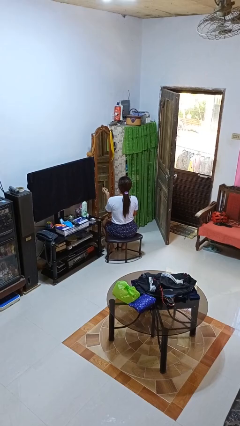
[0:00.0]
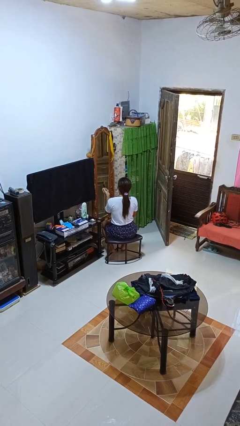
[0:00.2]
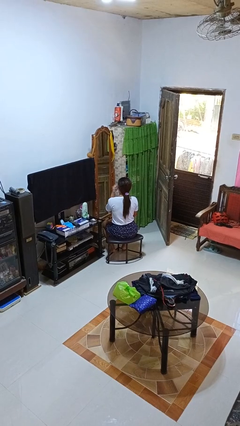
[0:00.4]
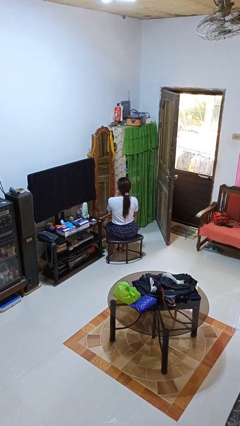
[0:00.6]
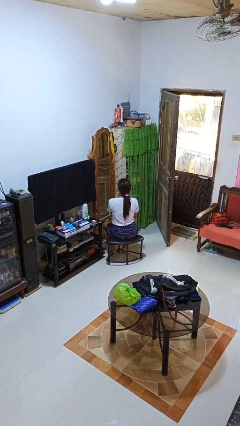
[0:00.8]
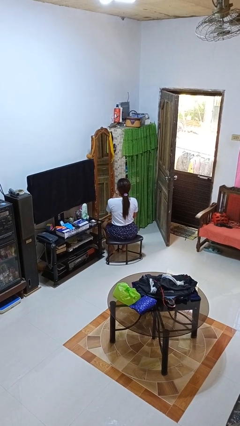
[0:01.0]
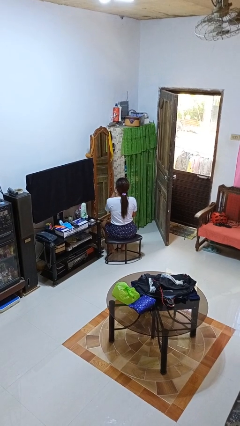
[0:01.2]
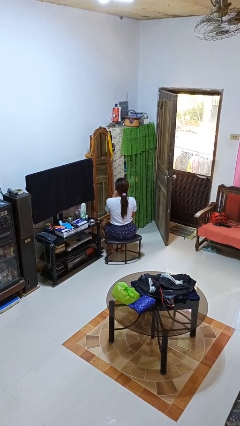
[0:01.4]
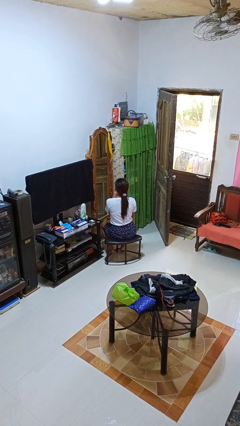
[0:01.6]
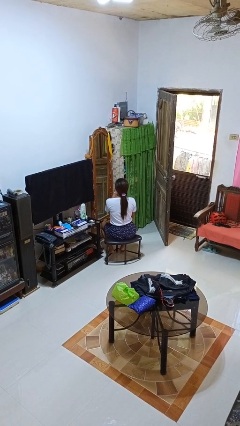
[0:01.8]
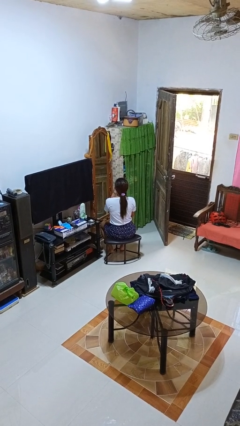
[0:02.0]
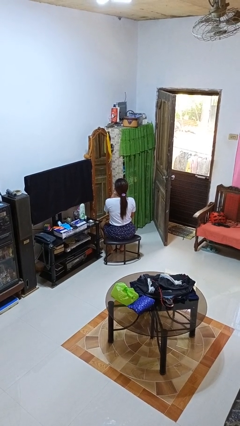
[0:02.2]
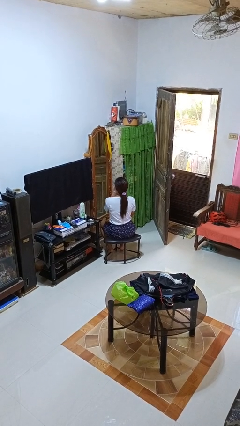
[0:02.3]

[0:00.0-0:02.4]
person applies lip makeup

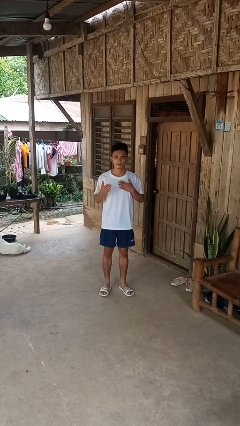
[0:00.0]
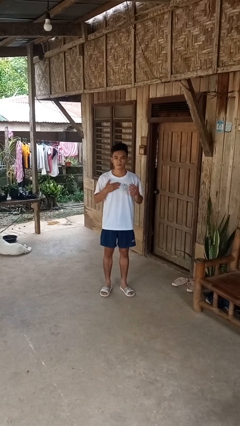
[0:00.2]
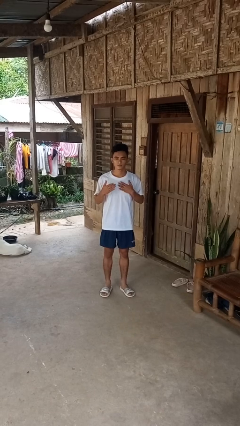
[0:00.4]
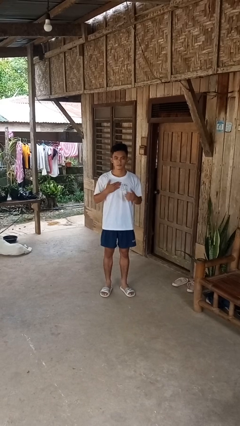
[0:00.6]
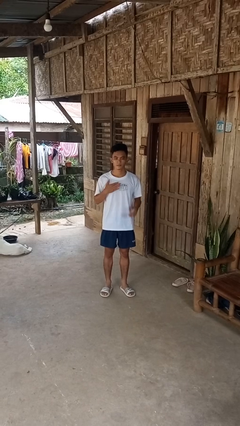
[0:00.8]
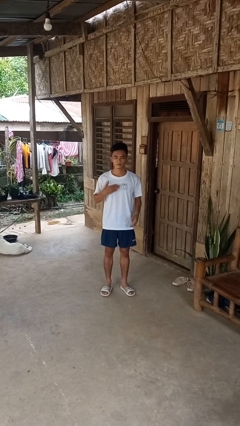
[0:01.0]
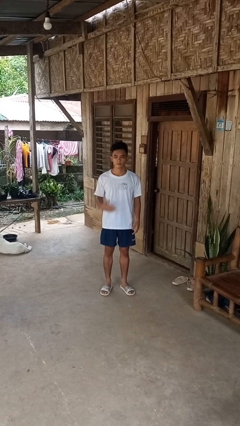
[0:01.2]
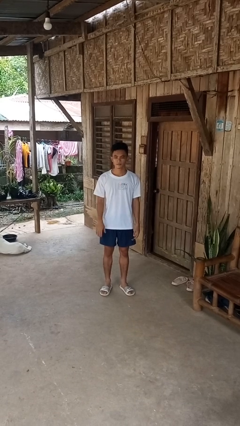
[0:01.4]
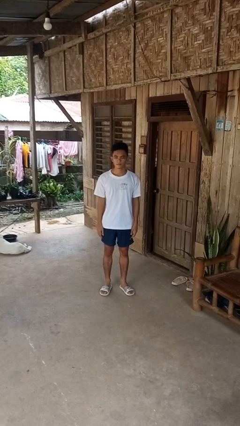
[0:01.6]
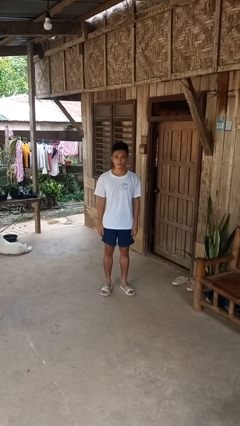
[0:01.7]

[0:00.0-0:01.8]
person drums on chest

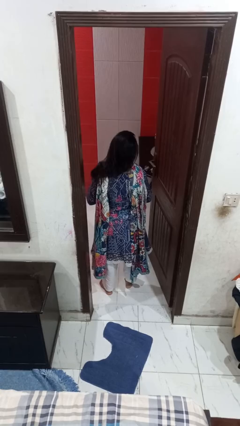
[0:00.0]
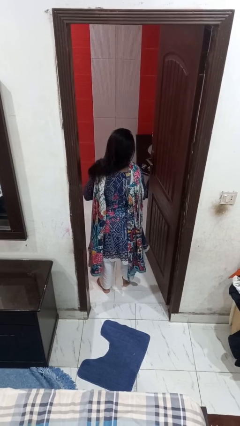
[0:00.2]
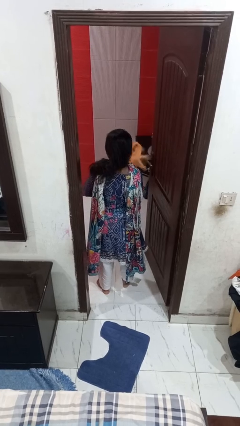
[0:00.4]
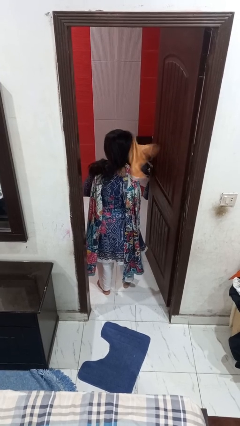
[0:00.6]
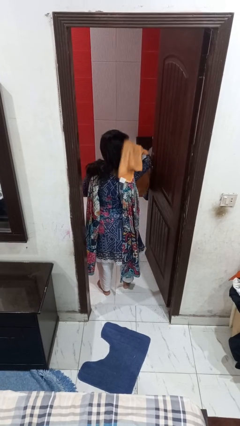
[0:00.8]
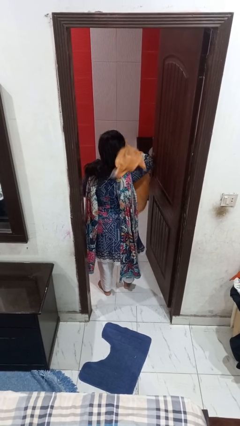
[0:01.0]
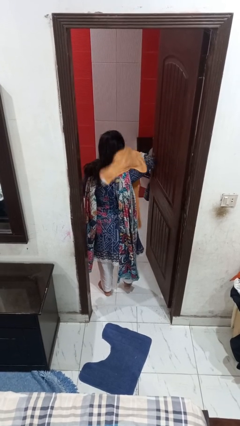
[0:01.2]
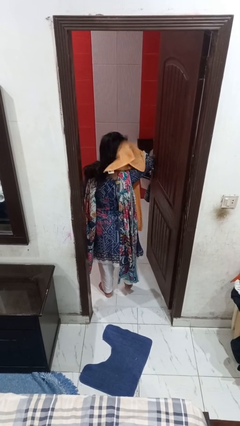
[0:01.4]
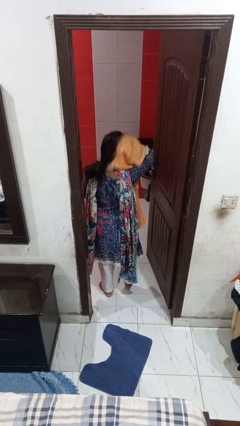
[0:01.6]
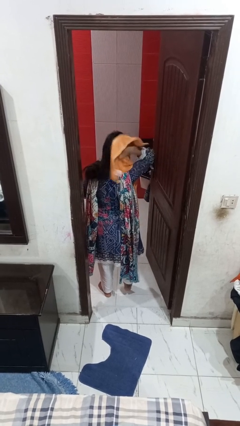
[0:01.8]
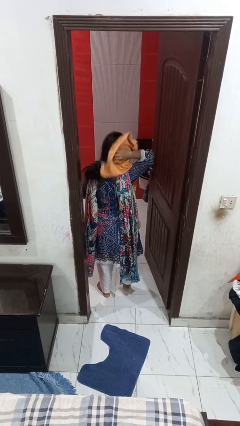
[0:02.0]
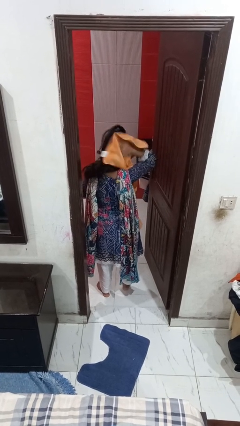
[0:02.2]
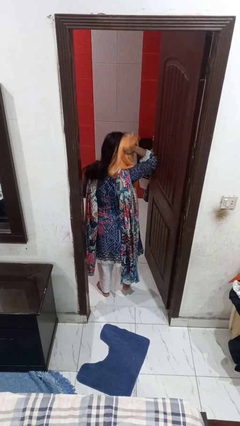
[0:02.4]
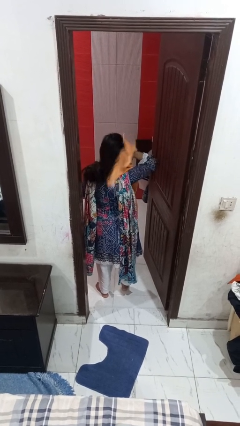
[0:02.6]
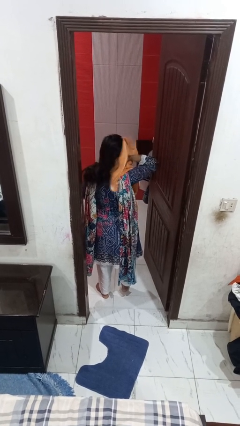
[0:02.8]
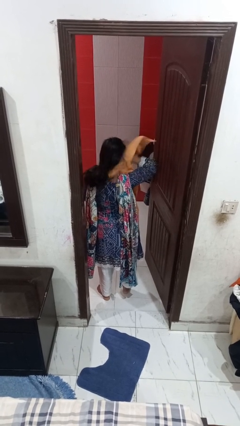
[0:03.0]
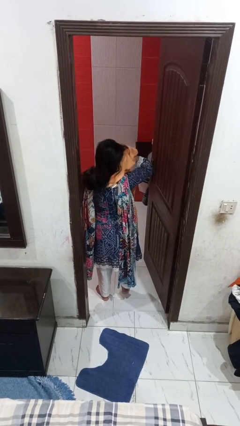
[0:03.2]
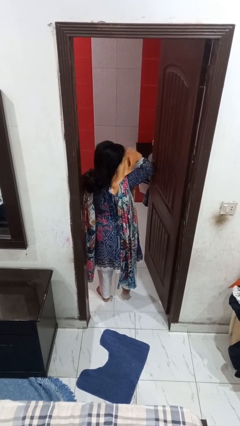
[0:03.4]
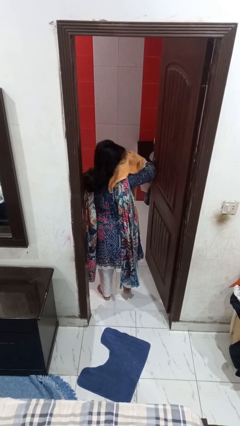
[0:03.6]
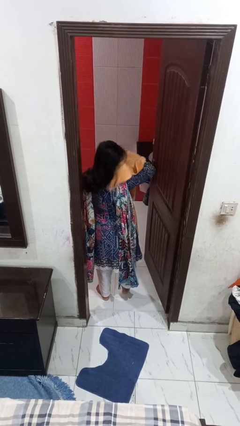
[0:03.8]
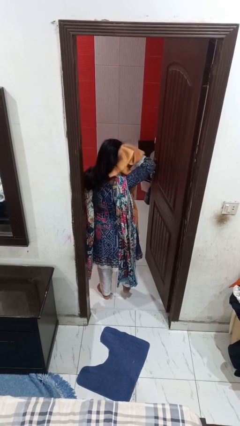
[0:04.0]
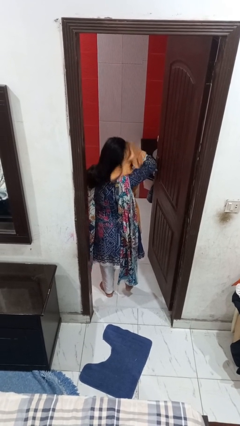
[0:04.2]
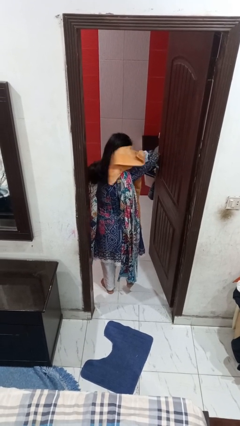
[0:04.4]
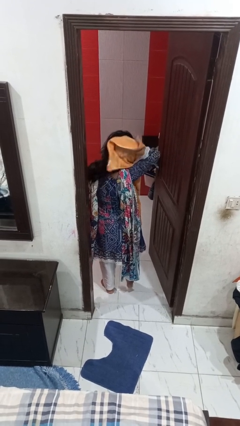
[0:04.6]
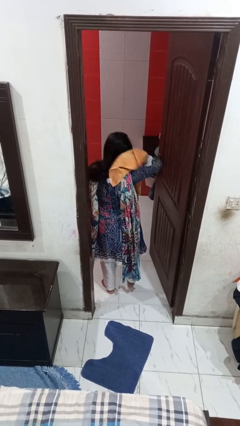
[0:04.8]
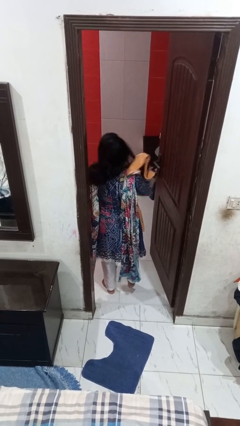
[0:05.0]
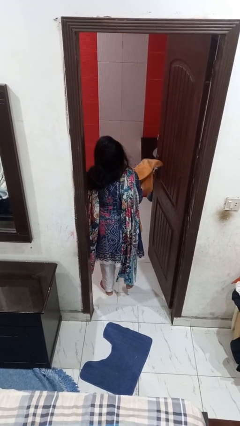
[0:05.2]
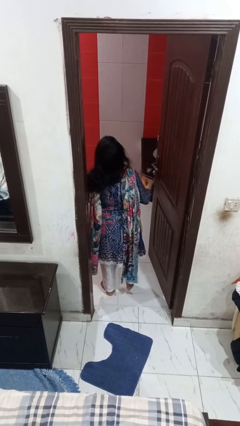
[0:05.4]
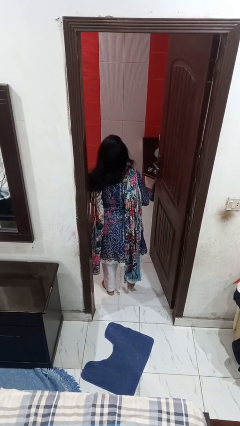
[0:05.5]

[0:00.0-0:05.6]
person dries hair with towel

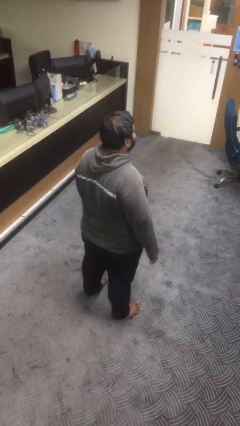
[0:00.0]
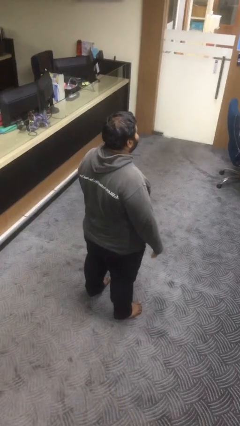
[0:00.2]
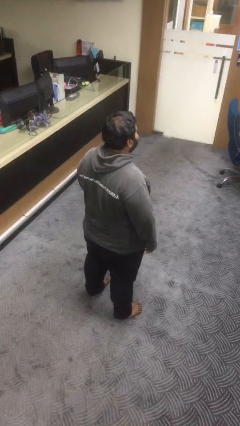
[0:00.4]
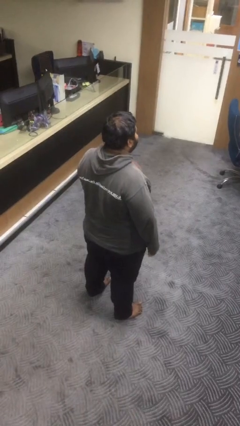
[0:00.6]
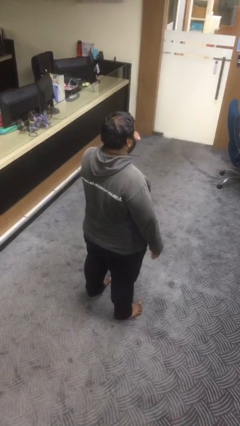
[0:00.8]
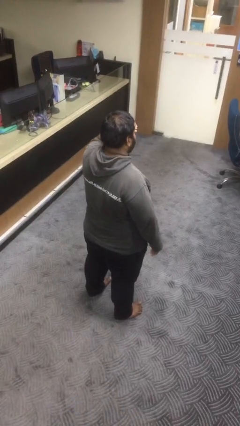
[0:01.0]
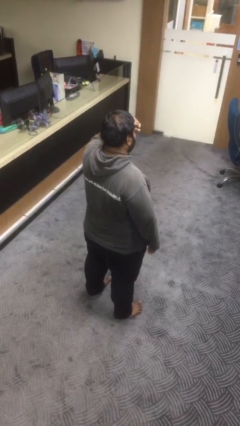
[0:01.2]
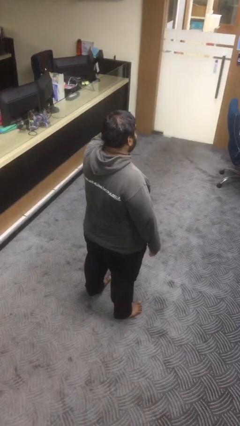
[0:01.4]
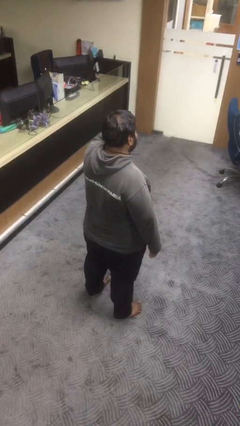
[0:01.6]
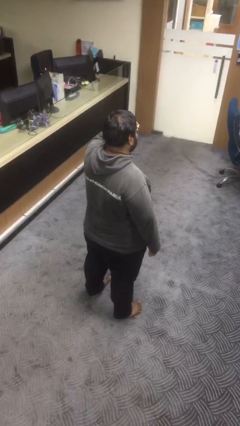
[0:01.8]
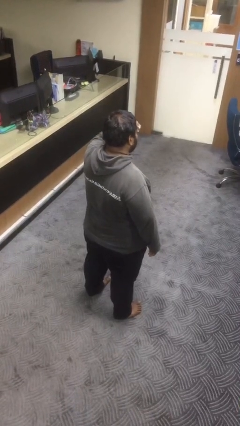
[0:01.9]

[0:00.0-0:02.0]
person rubs eyes

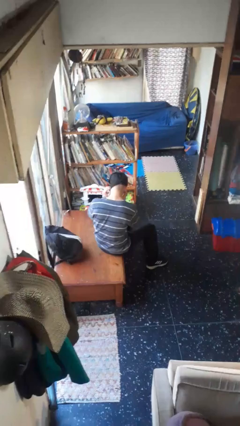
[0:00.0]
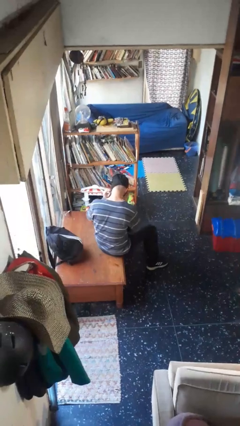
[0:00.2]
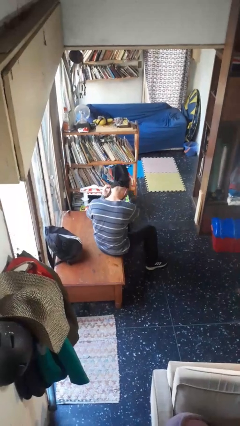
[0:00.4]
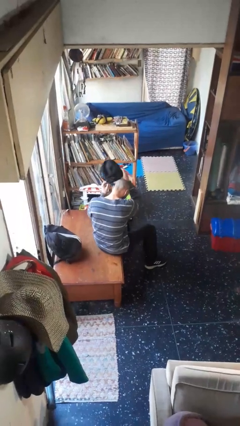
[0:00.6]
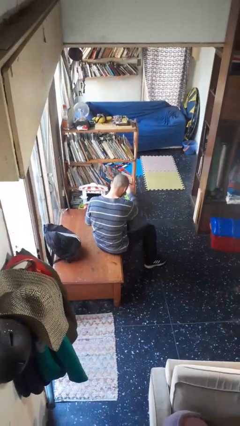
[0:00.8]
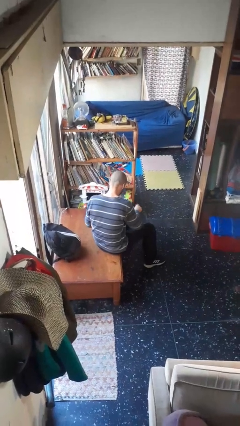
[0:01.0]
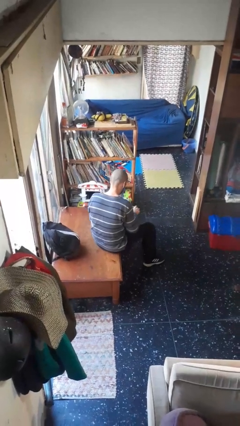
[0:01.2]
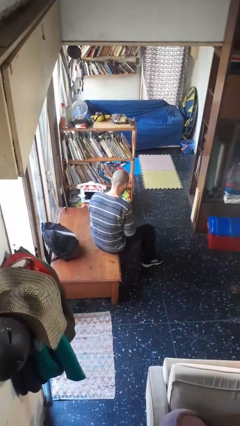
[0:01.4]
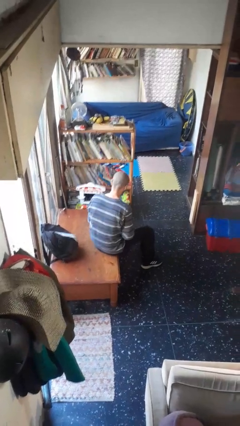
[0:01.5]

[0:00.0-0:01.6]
person takes off facemask

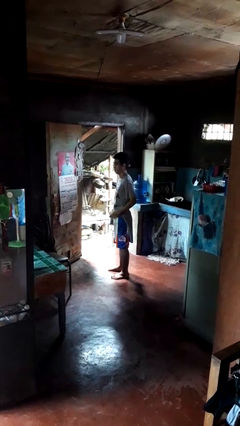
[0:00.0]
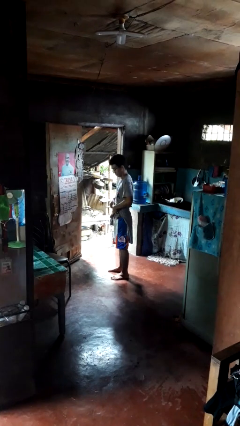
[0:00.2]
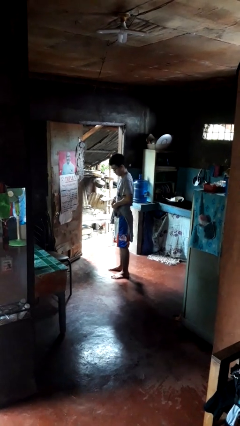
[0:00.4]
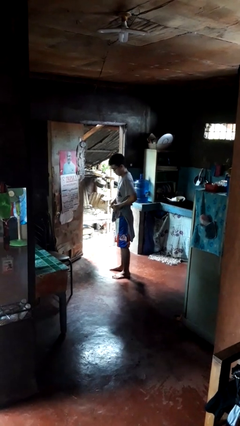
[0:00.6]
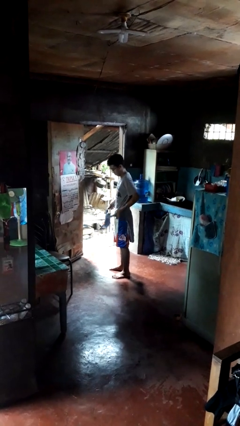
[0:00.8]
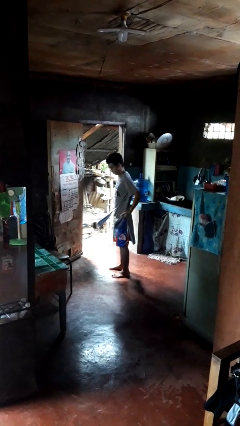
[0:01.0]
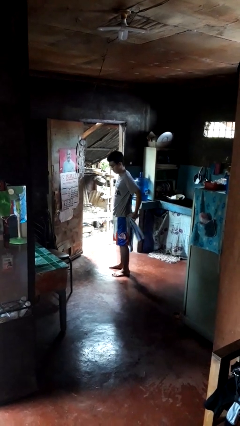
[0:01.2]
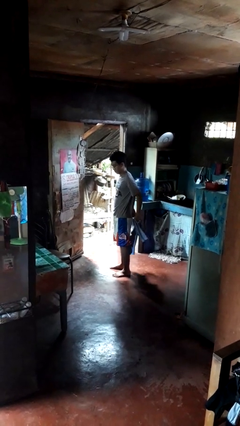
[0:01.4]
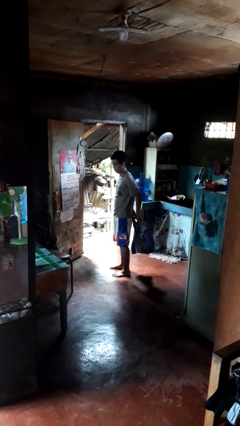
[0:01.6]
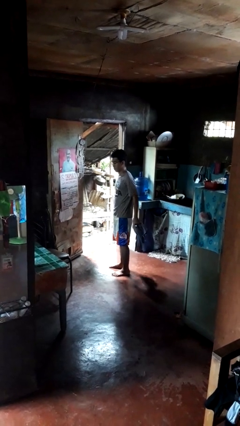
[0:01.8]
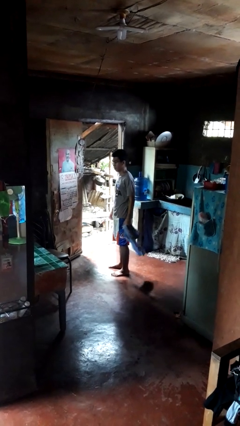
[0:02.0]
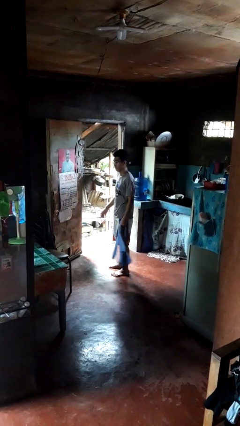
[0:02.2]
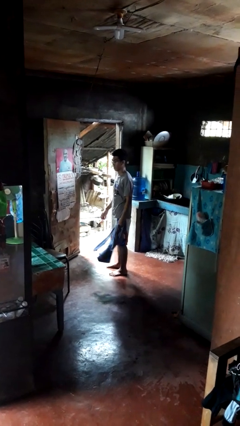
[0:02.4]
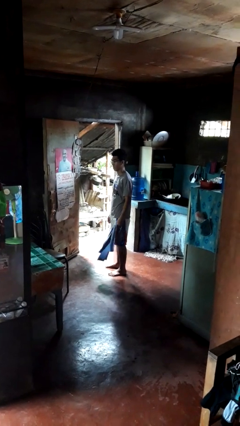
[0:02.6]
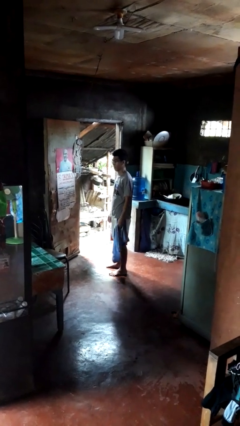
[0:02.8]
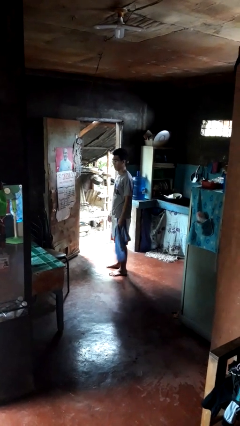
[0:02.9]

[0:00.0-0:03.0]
person unties jacket around waist

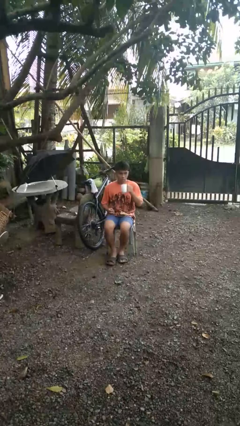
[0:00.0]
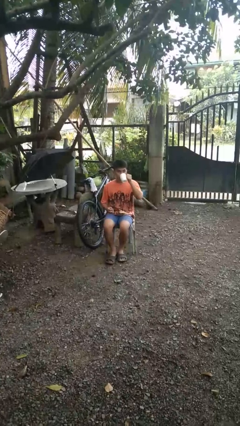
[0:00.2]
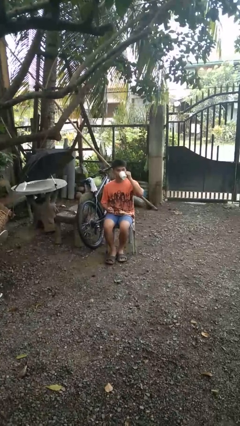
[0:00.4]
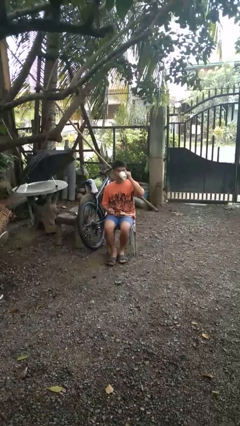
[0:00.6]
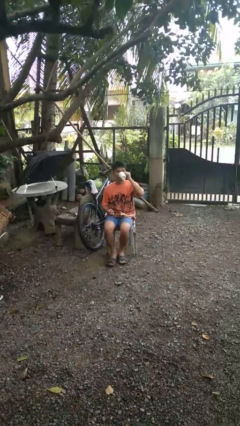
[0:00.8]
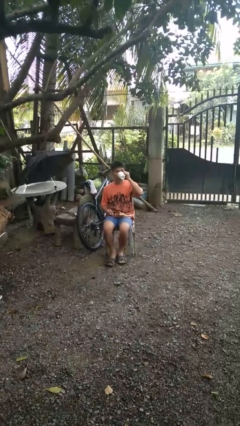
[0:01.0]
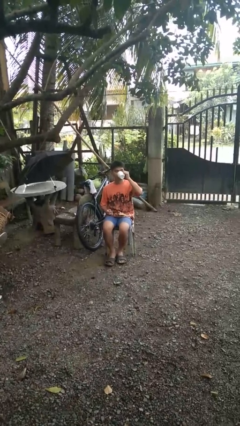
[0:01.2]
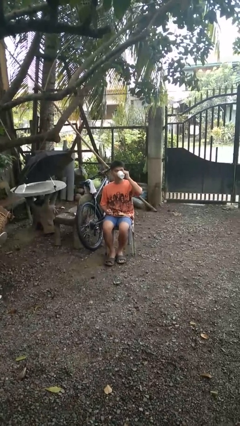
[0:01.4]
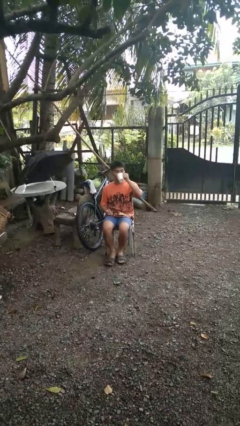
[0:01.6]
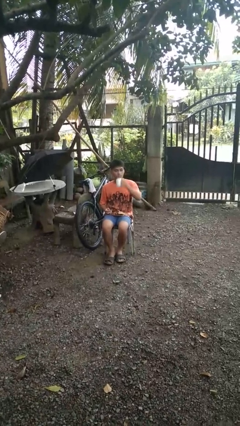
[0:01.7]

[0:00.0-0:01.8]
person drinks from mug
